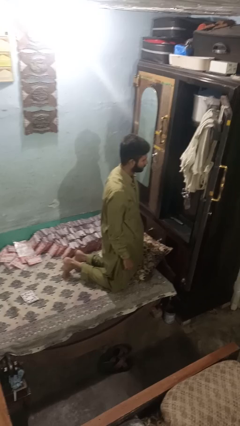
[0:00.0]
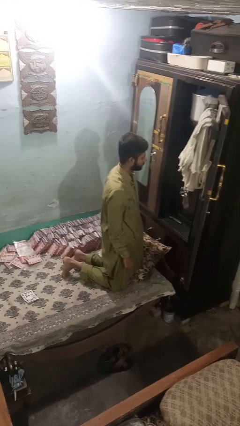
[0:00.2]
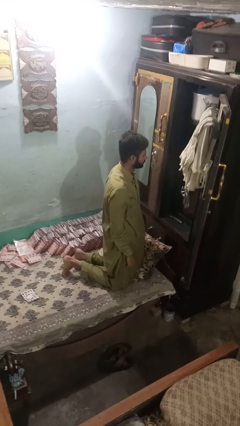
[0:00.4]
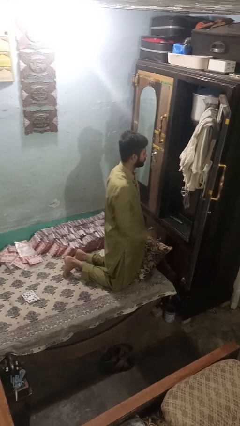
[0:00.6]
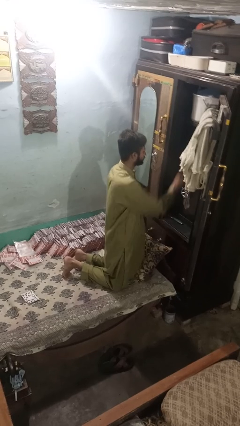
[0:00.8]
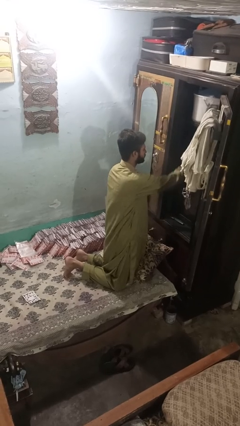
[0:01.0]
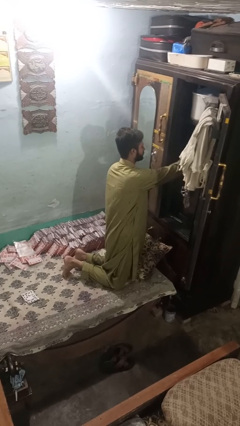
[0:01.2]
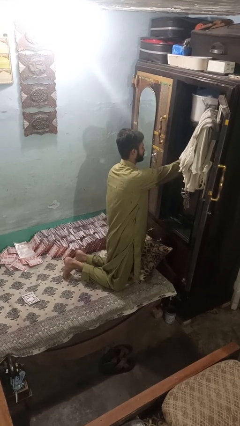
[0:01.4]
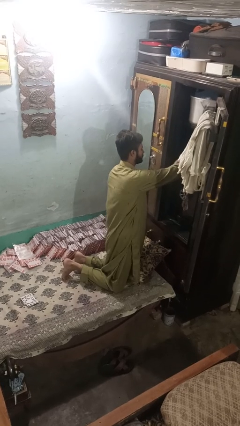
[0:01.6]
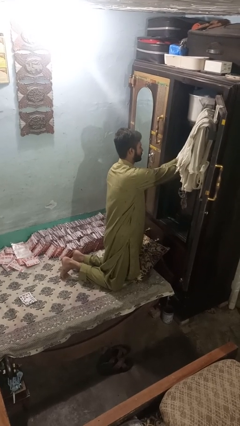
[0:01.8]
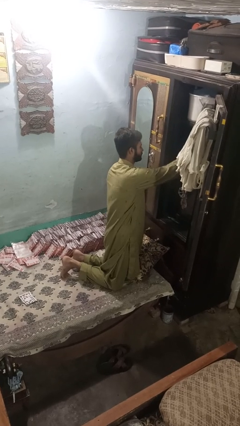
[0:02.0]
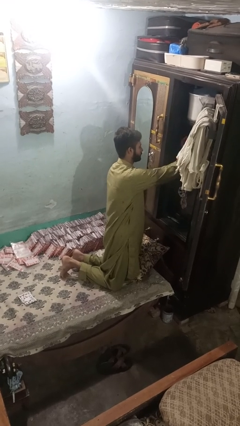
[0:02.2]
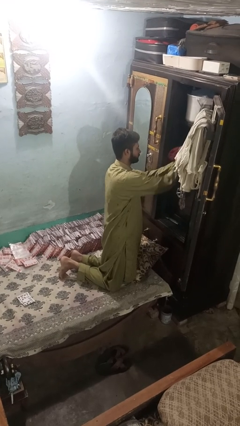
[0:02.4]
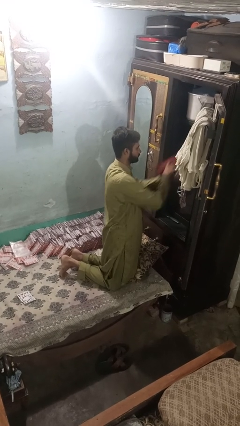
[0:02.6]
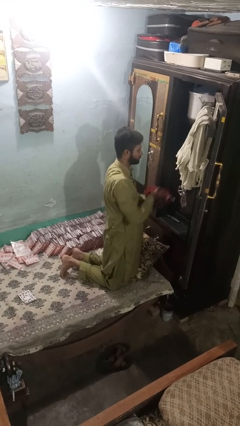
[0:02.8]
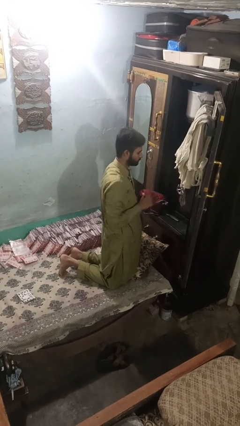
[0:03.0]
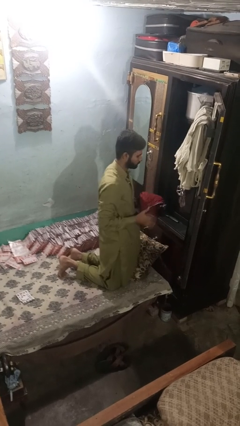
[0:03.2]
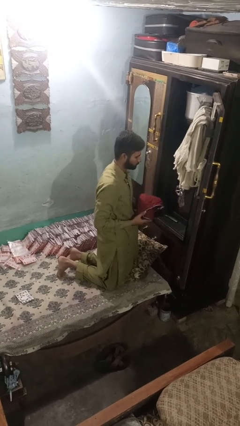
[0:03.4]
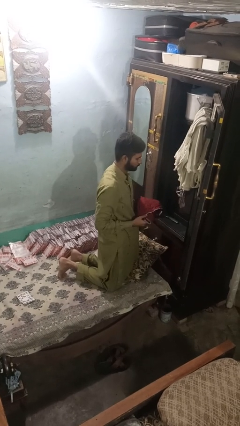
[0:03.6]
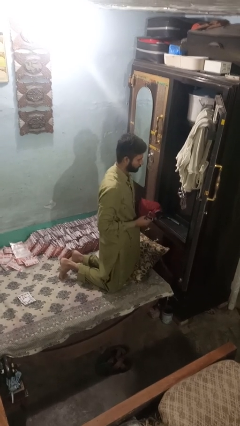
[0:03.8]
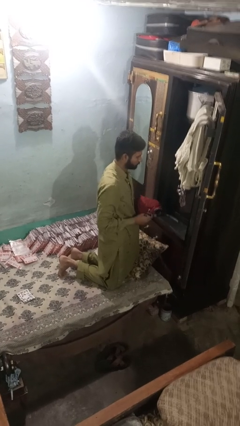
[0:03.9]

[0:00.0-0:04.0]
person takes clothes from dresser

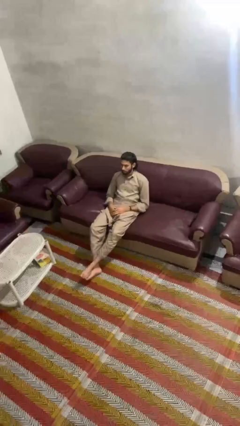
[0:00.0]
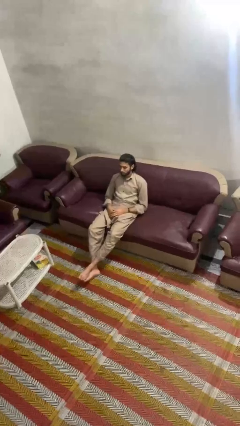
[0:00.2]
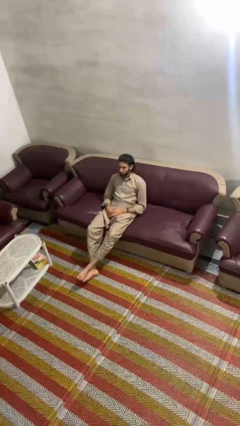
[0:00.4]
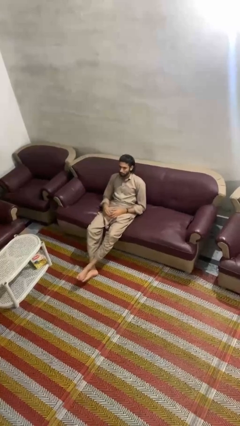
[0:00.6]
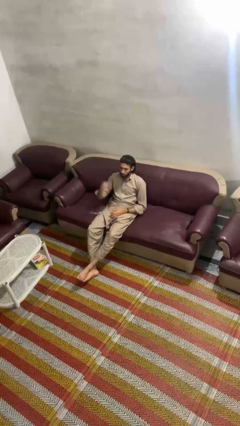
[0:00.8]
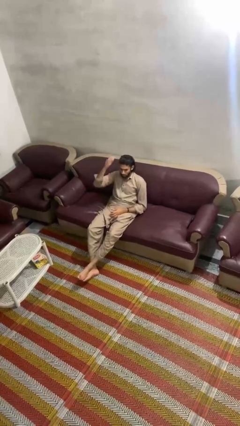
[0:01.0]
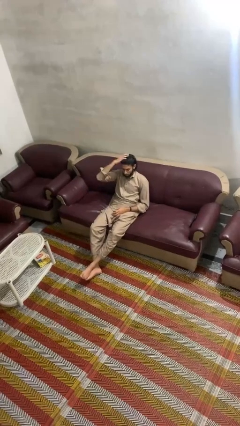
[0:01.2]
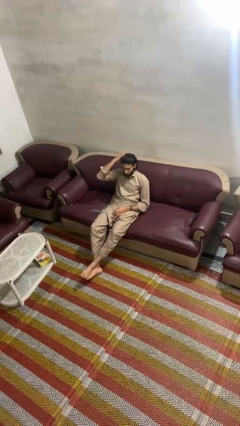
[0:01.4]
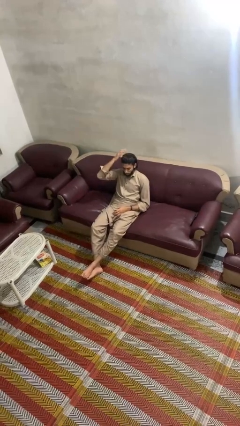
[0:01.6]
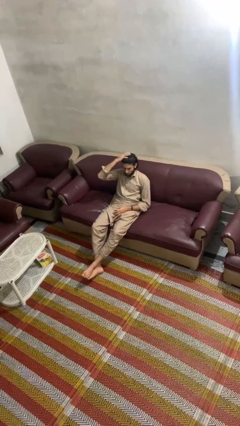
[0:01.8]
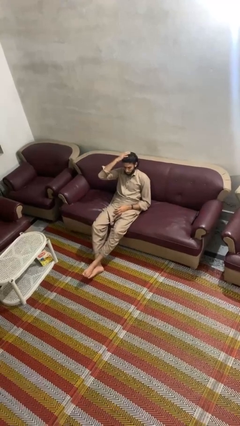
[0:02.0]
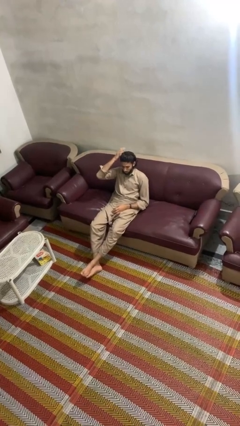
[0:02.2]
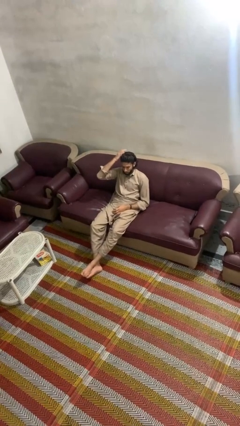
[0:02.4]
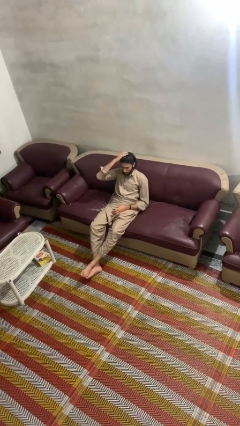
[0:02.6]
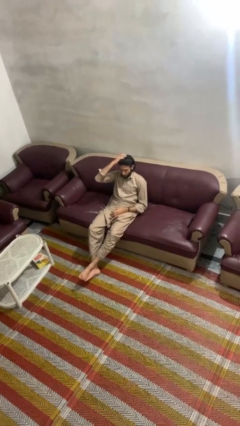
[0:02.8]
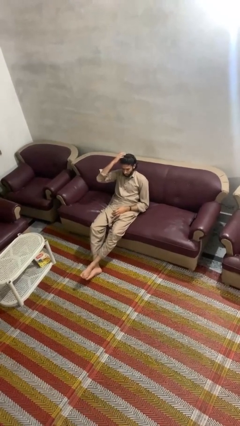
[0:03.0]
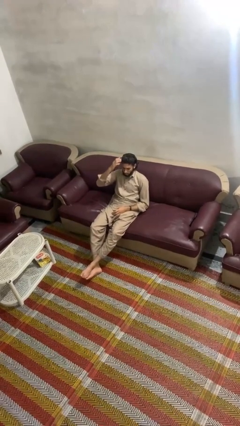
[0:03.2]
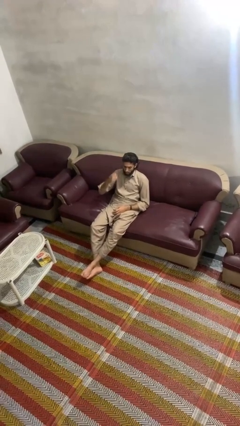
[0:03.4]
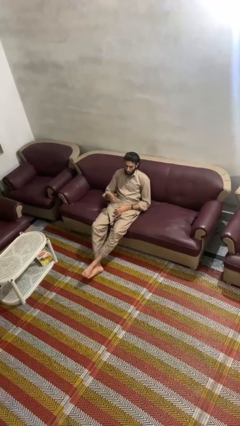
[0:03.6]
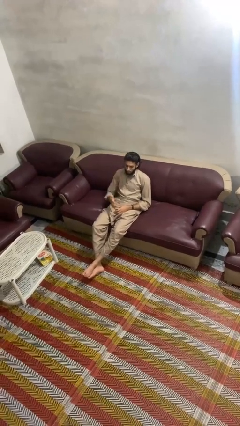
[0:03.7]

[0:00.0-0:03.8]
person pats head

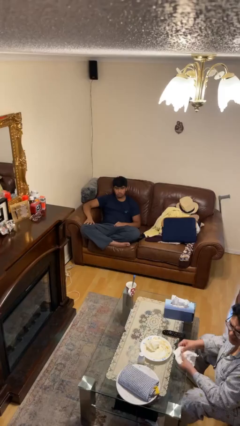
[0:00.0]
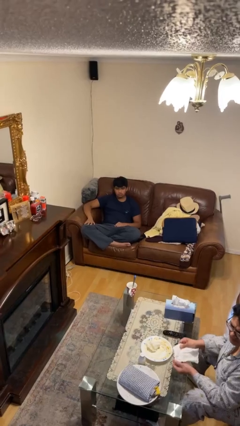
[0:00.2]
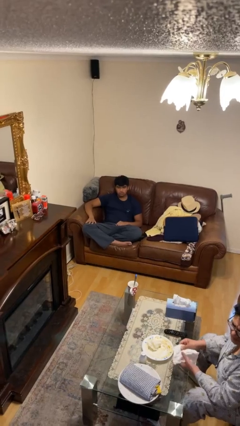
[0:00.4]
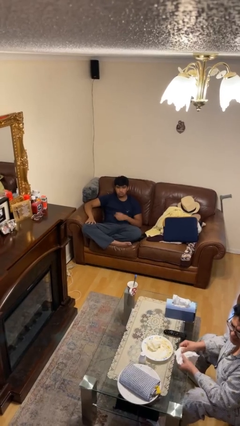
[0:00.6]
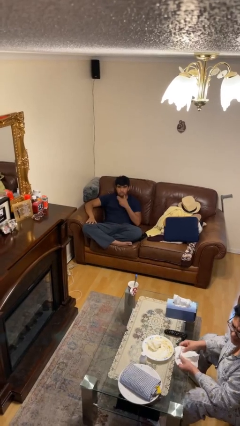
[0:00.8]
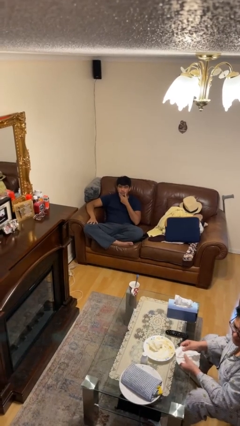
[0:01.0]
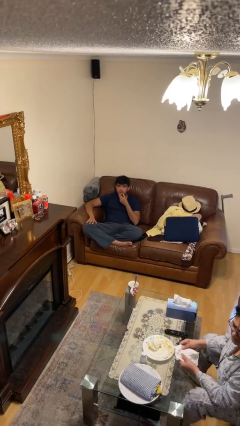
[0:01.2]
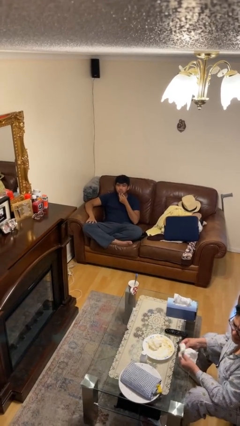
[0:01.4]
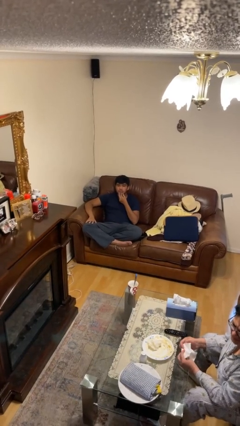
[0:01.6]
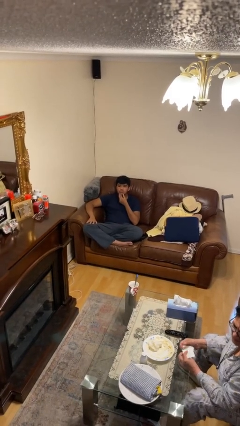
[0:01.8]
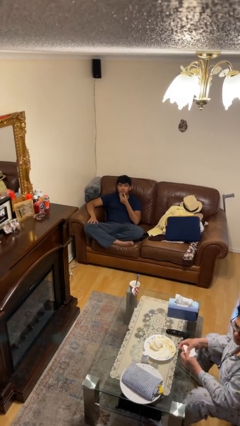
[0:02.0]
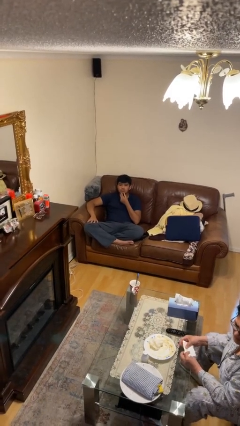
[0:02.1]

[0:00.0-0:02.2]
person strokes chin

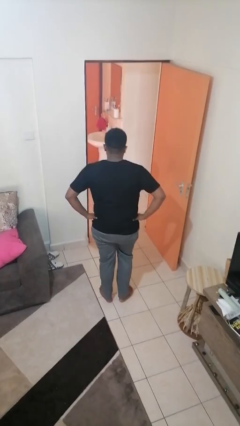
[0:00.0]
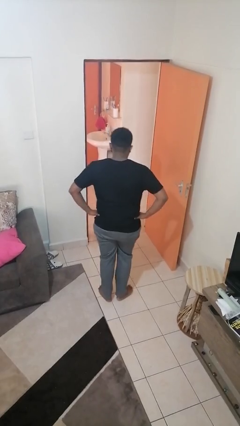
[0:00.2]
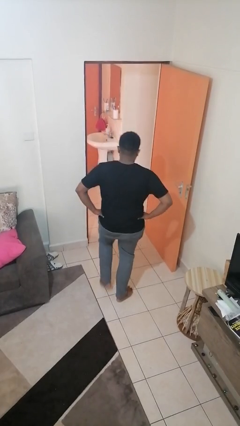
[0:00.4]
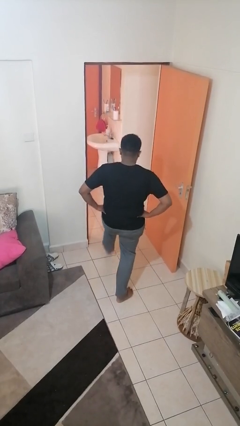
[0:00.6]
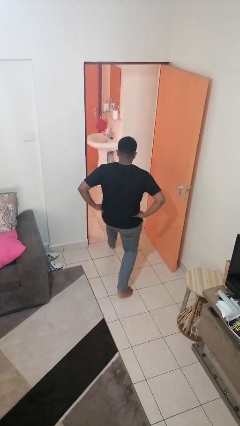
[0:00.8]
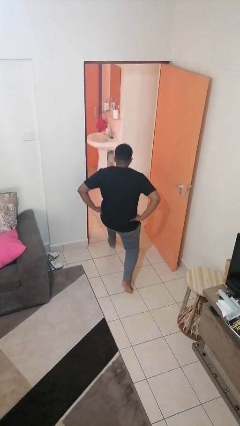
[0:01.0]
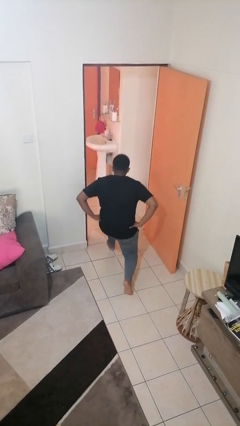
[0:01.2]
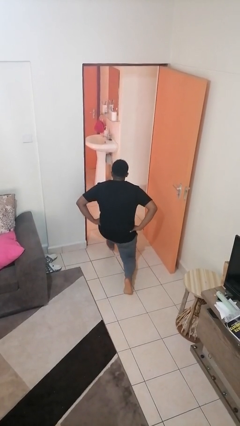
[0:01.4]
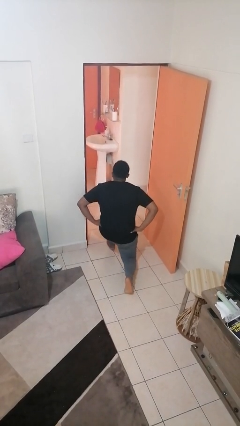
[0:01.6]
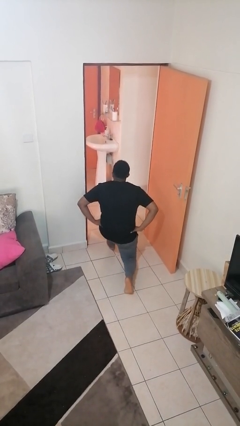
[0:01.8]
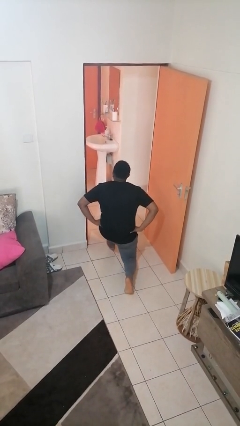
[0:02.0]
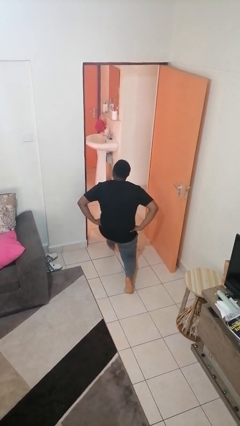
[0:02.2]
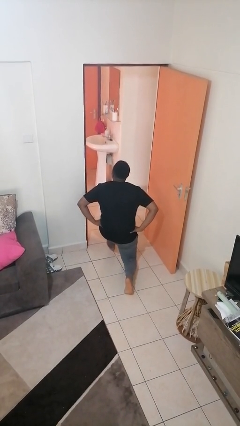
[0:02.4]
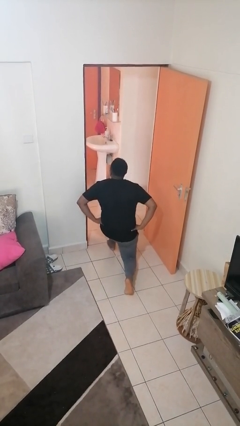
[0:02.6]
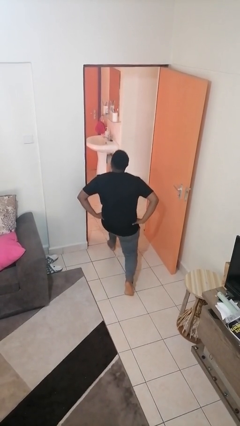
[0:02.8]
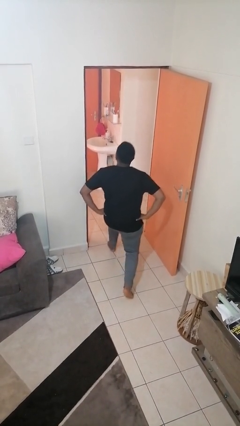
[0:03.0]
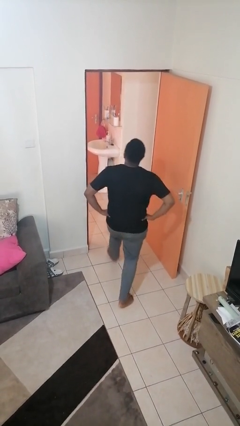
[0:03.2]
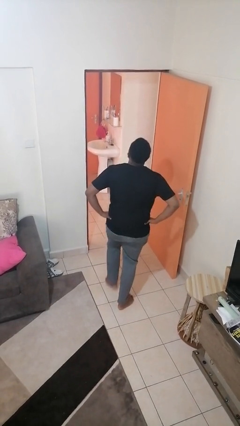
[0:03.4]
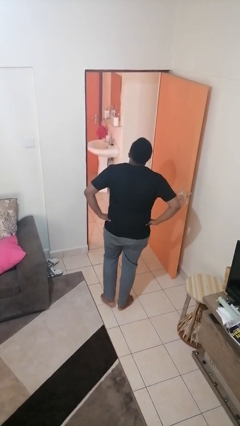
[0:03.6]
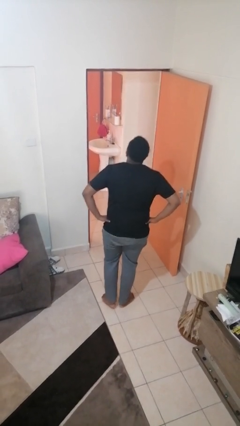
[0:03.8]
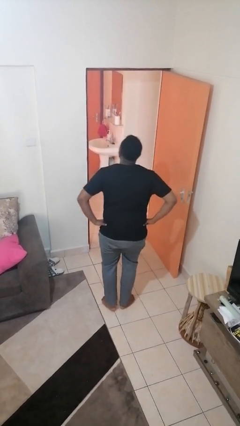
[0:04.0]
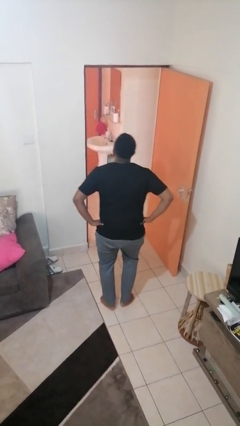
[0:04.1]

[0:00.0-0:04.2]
person exercises with lunges

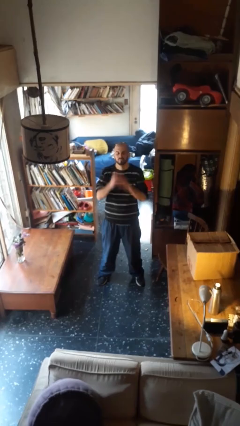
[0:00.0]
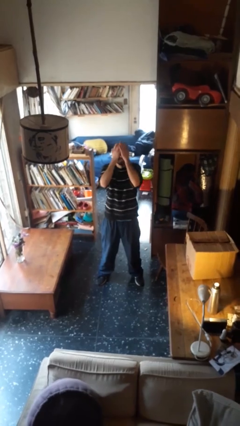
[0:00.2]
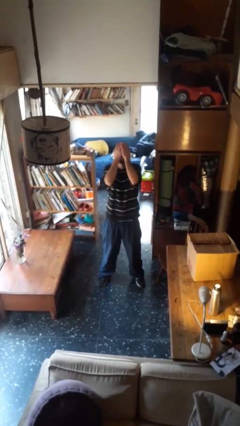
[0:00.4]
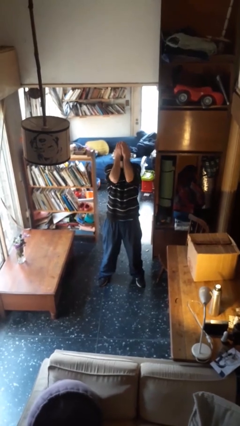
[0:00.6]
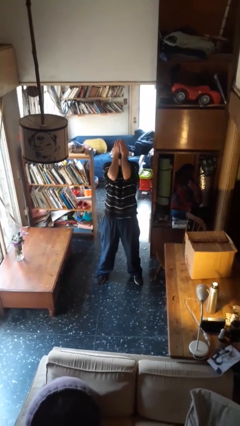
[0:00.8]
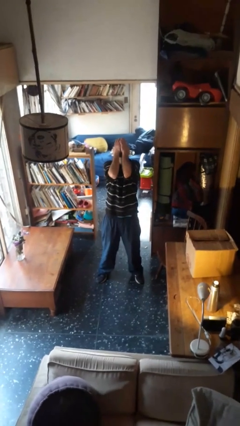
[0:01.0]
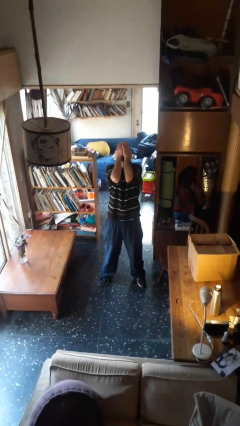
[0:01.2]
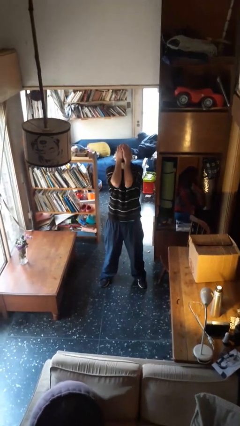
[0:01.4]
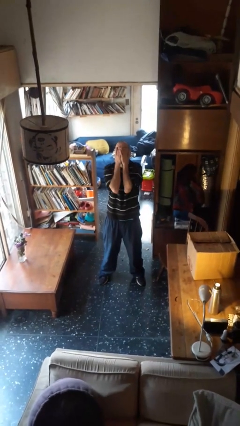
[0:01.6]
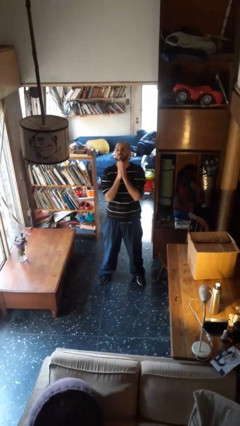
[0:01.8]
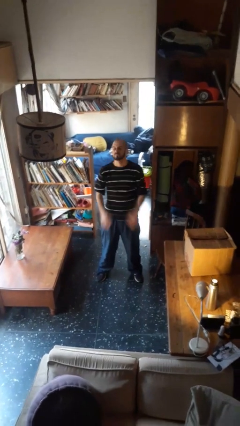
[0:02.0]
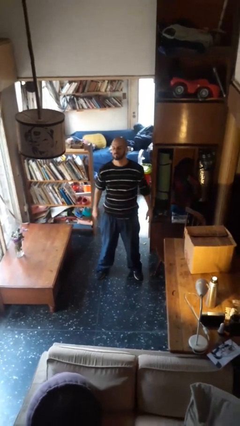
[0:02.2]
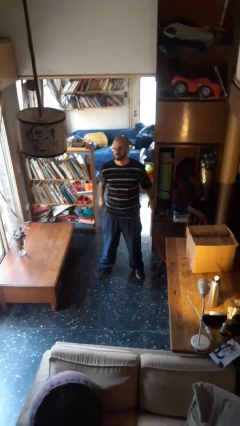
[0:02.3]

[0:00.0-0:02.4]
person covers face with hands

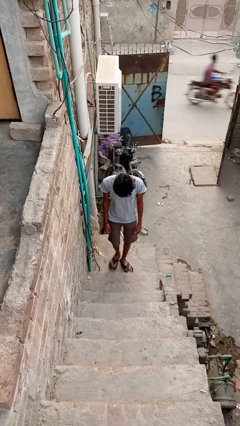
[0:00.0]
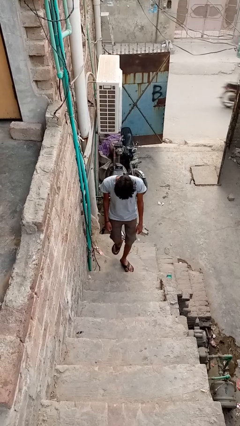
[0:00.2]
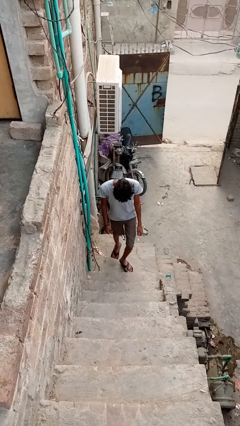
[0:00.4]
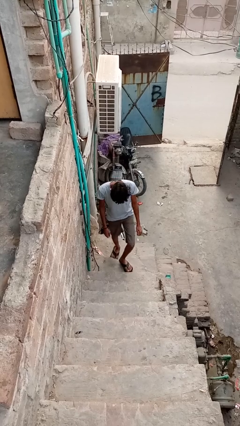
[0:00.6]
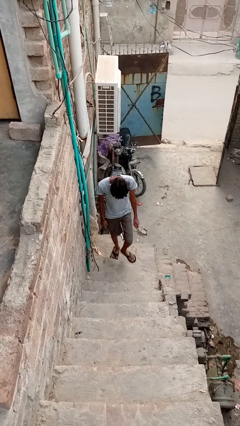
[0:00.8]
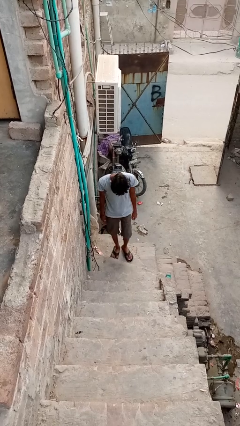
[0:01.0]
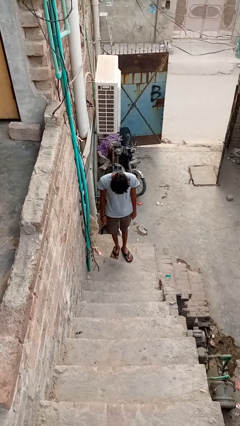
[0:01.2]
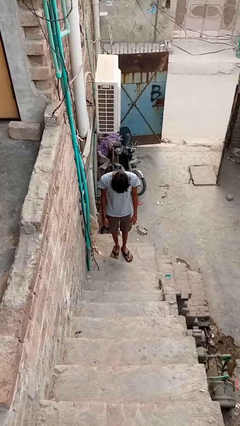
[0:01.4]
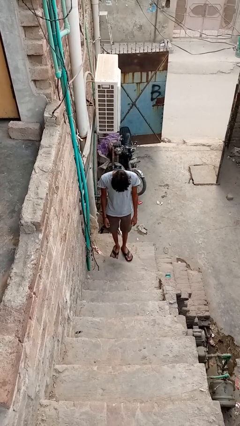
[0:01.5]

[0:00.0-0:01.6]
person climbs down stairs
